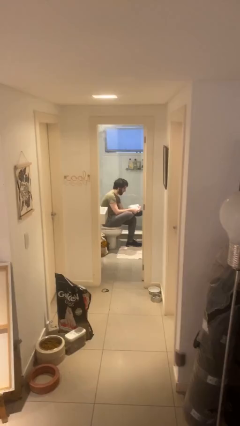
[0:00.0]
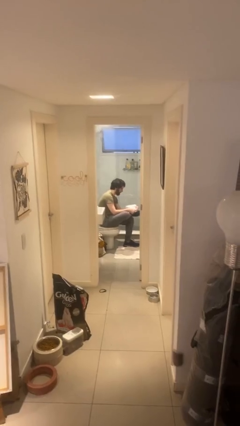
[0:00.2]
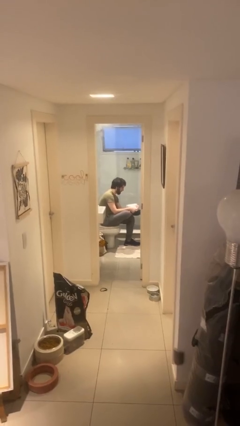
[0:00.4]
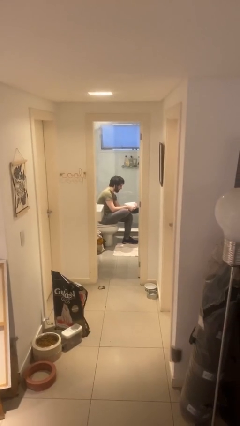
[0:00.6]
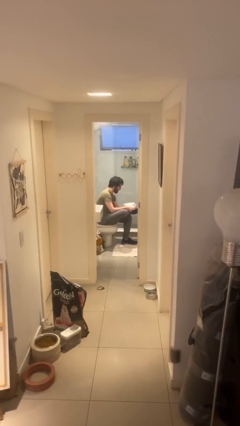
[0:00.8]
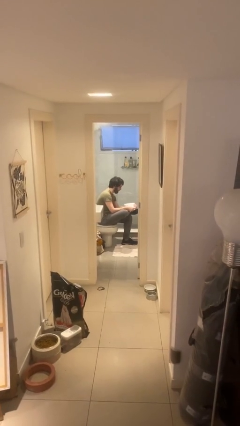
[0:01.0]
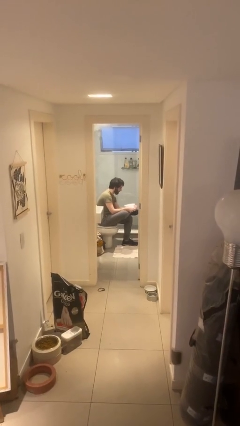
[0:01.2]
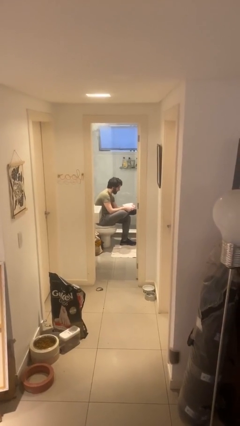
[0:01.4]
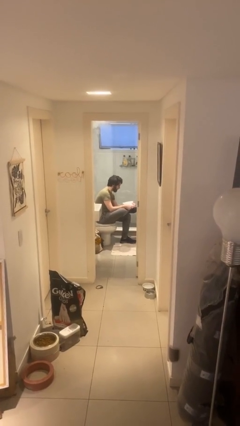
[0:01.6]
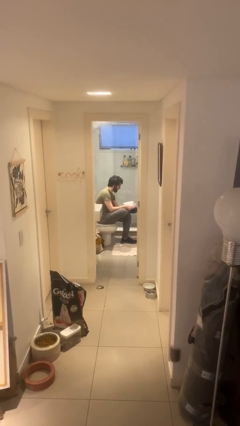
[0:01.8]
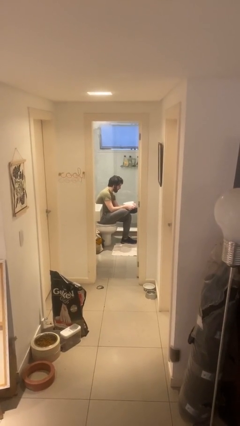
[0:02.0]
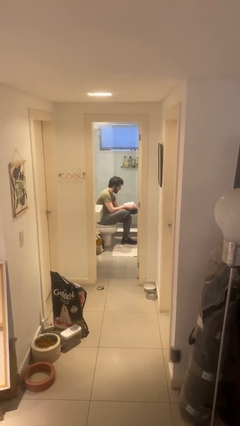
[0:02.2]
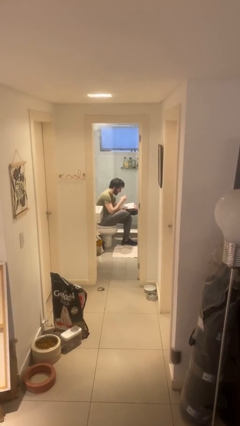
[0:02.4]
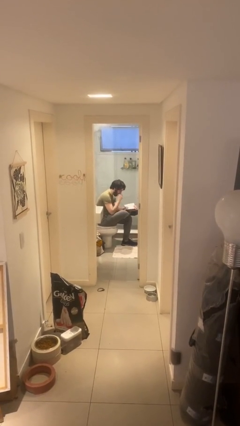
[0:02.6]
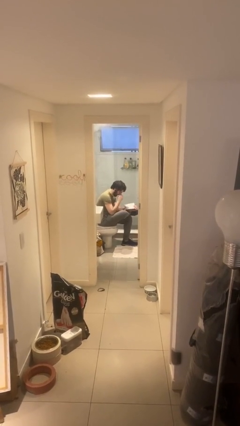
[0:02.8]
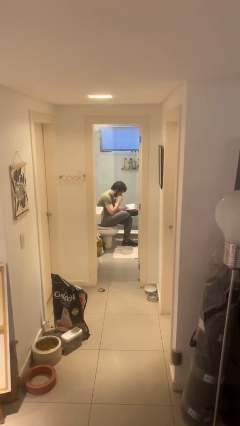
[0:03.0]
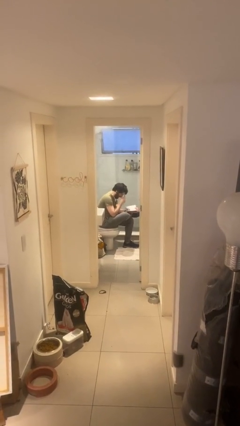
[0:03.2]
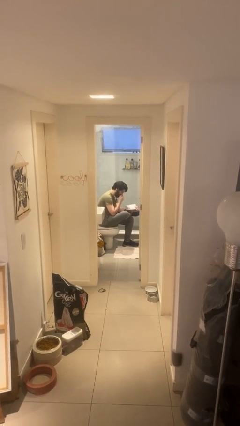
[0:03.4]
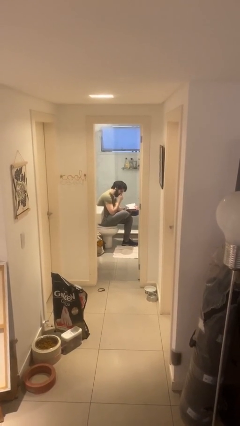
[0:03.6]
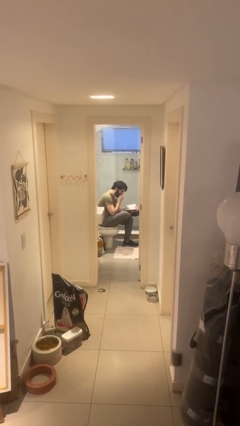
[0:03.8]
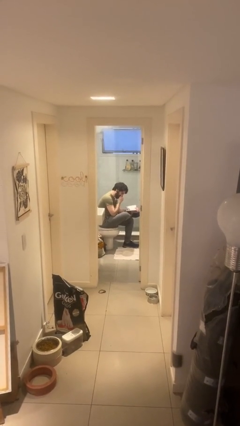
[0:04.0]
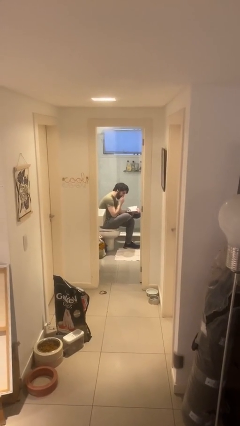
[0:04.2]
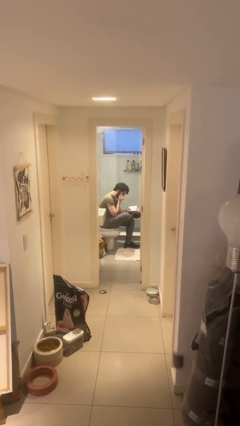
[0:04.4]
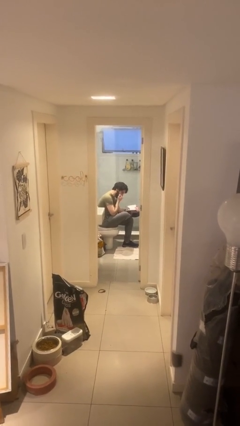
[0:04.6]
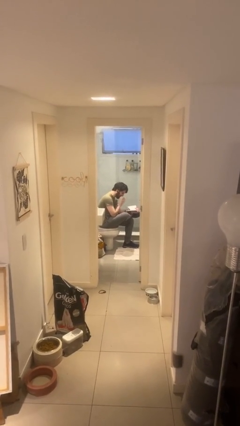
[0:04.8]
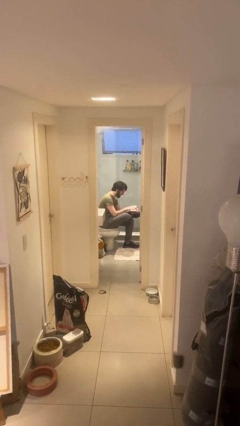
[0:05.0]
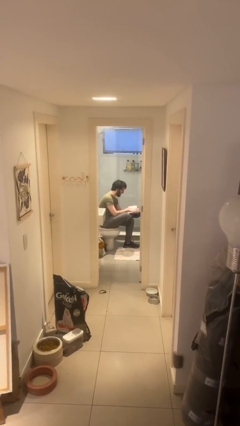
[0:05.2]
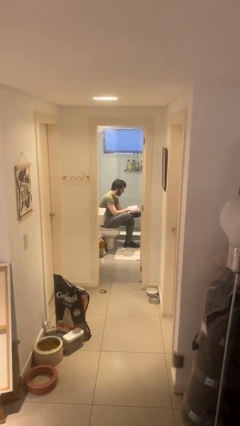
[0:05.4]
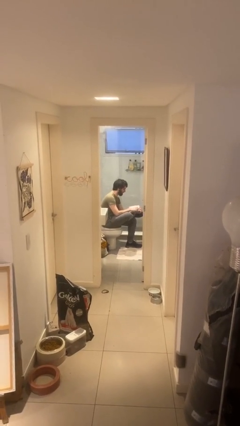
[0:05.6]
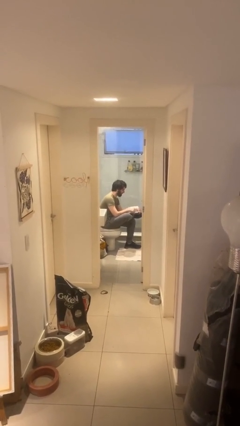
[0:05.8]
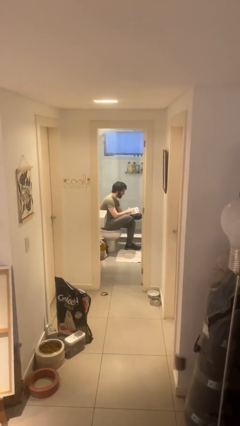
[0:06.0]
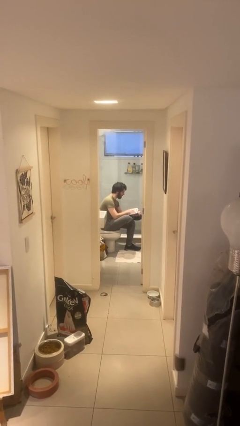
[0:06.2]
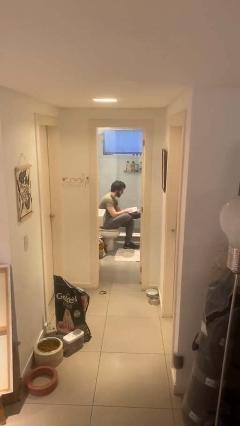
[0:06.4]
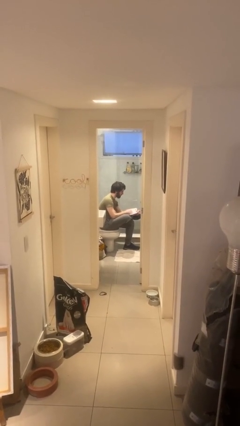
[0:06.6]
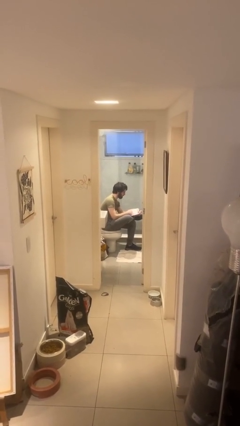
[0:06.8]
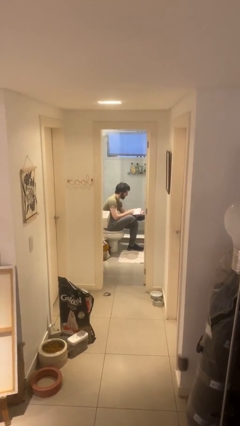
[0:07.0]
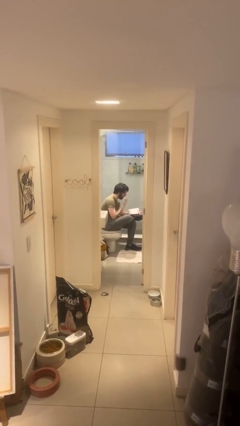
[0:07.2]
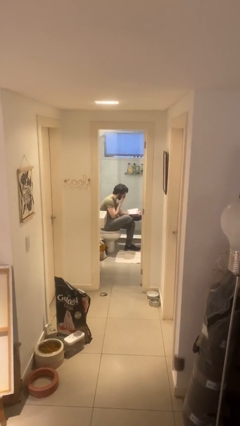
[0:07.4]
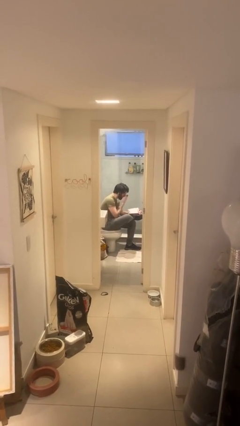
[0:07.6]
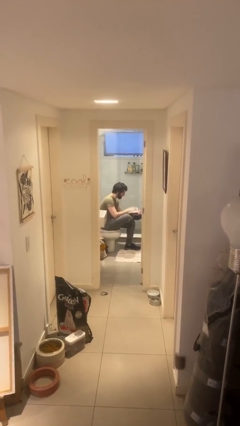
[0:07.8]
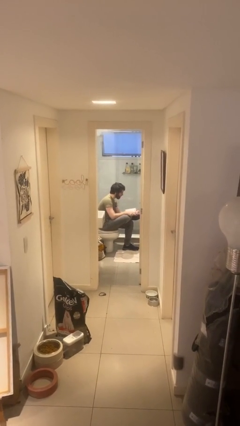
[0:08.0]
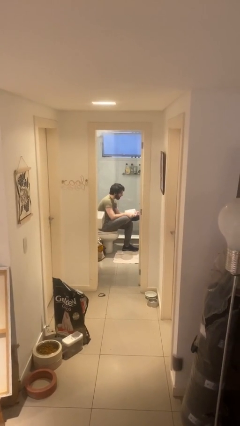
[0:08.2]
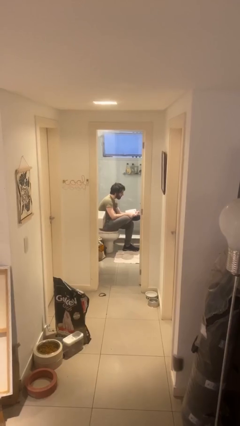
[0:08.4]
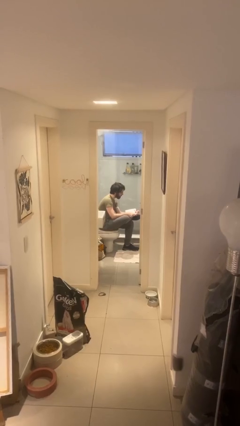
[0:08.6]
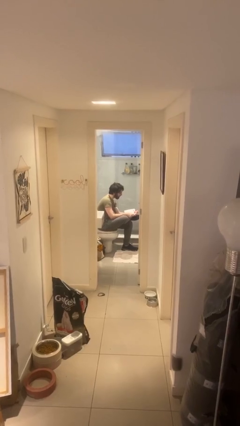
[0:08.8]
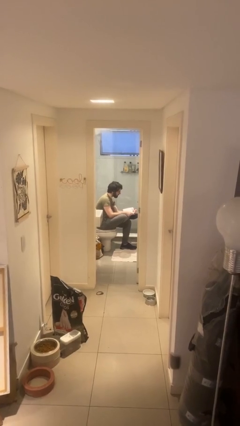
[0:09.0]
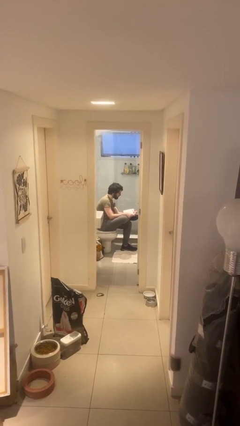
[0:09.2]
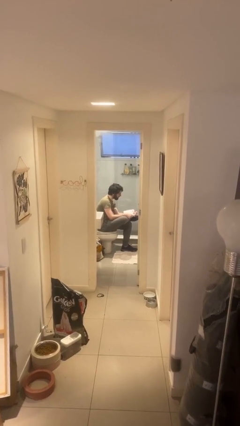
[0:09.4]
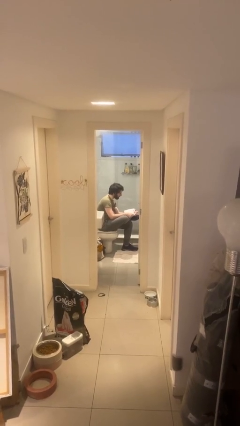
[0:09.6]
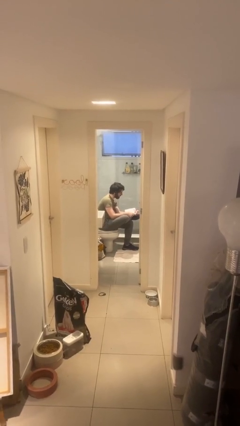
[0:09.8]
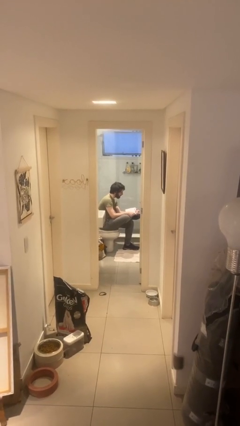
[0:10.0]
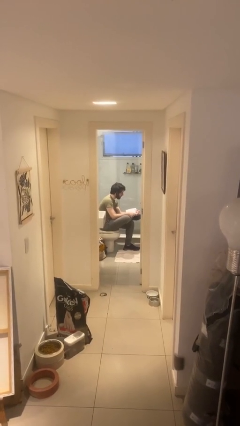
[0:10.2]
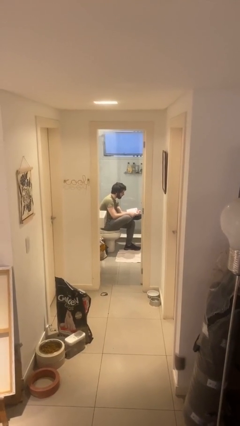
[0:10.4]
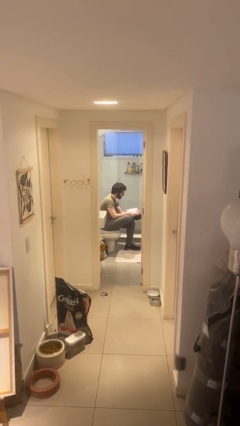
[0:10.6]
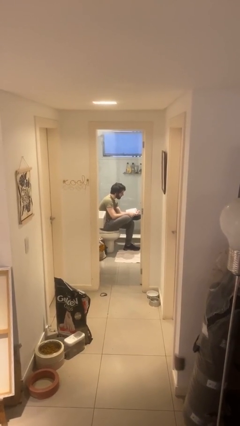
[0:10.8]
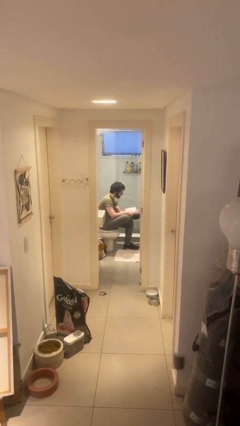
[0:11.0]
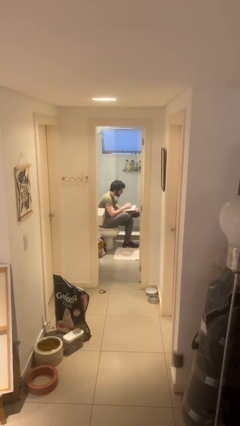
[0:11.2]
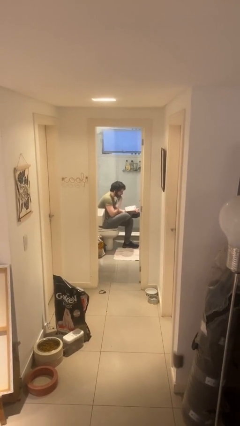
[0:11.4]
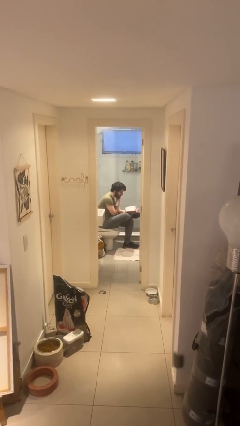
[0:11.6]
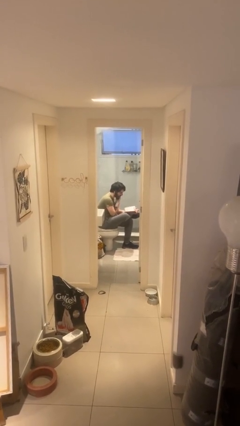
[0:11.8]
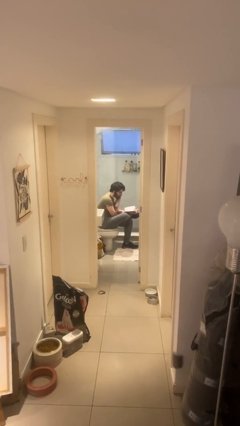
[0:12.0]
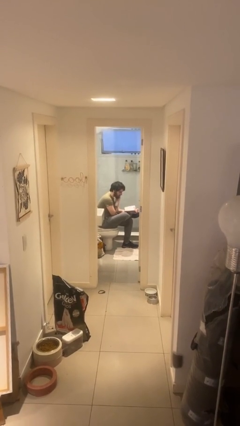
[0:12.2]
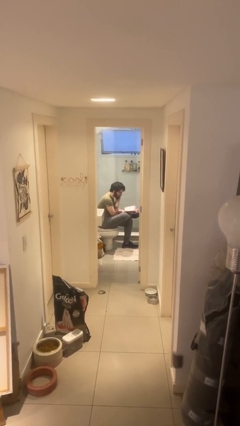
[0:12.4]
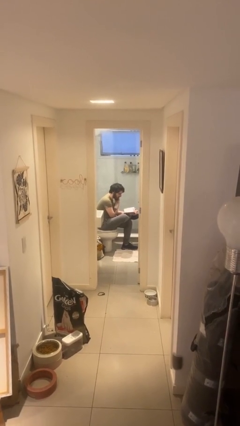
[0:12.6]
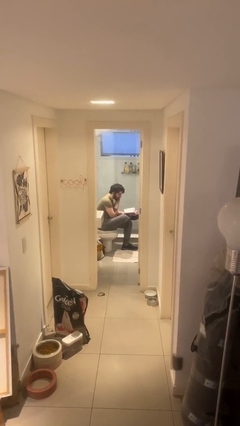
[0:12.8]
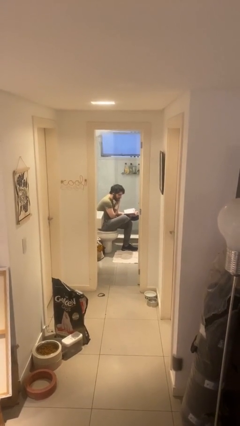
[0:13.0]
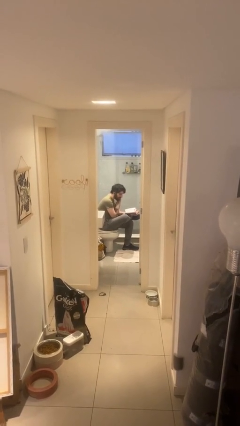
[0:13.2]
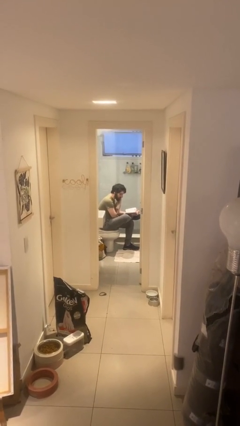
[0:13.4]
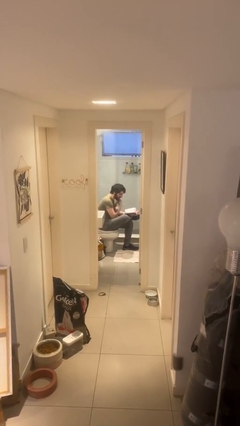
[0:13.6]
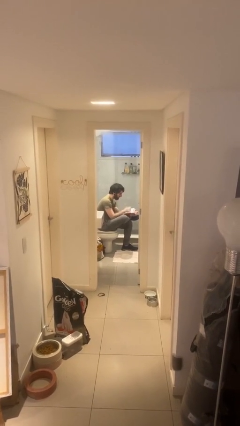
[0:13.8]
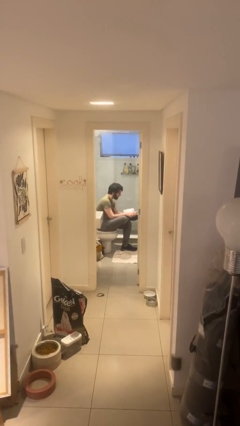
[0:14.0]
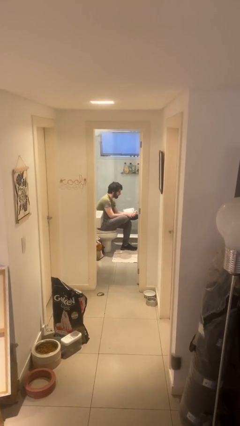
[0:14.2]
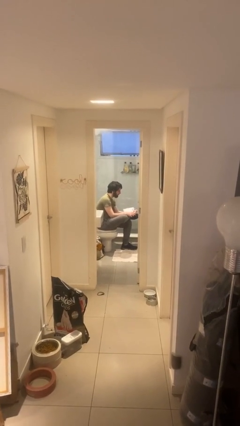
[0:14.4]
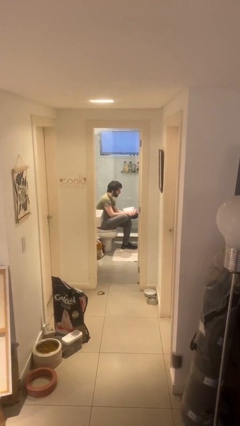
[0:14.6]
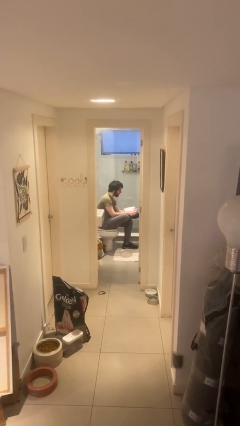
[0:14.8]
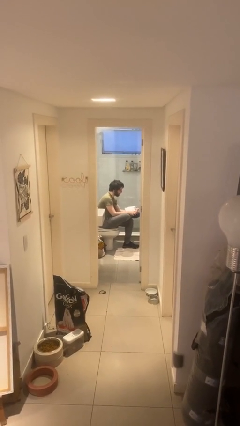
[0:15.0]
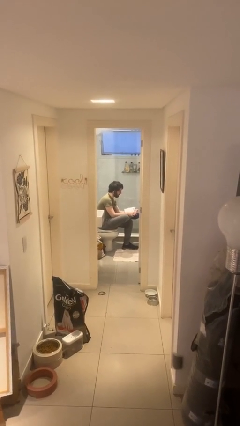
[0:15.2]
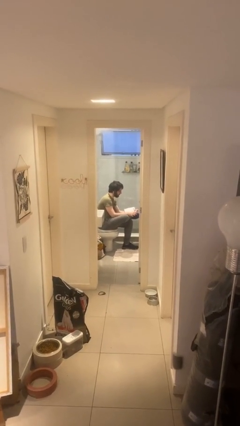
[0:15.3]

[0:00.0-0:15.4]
person reads document

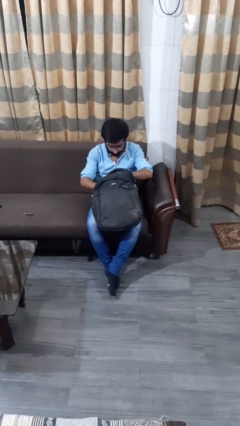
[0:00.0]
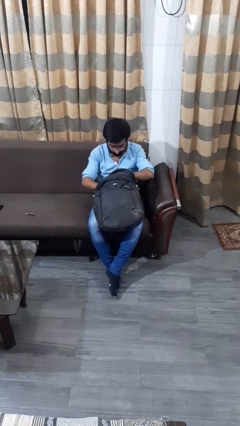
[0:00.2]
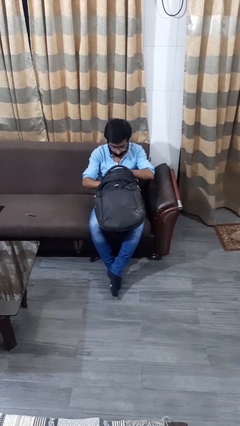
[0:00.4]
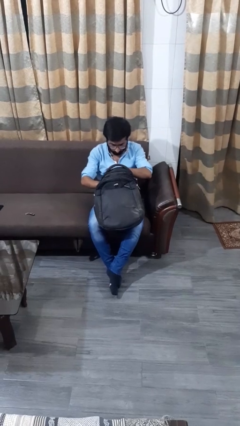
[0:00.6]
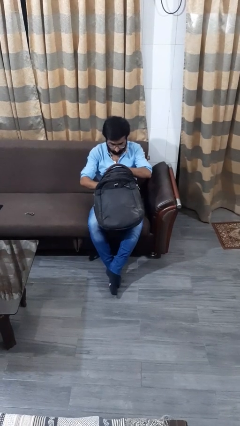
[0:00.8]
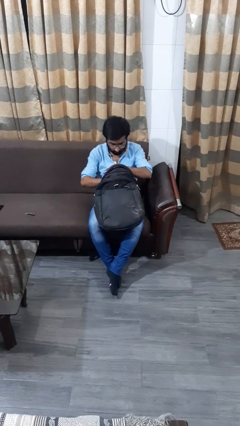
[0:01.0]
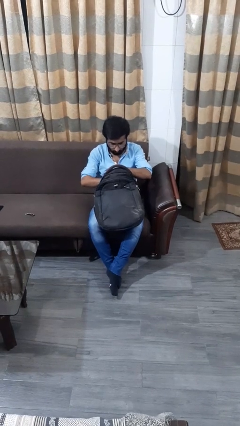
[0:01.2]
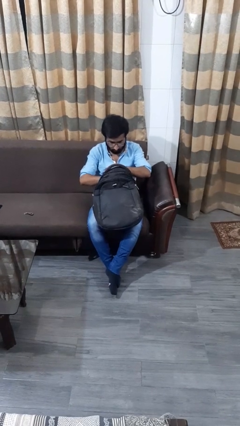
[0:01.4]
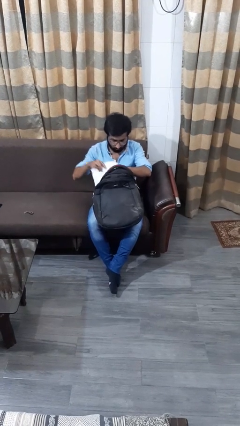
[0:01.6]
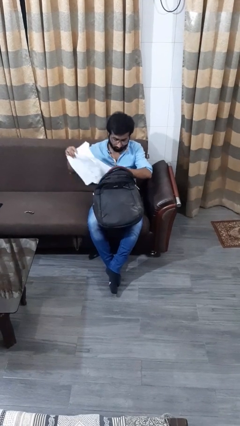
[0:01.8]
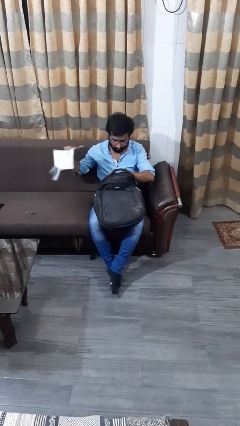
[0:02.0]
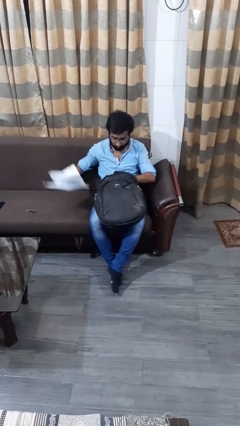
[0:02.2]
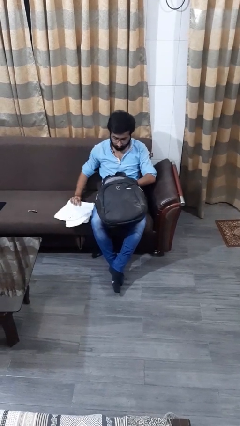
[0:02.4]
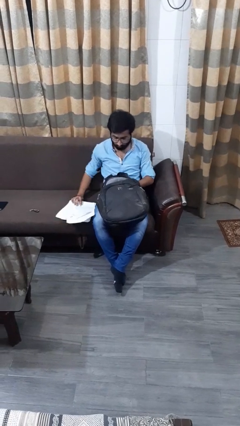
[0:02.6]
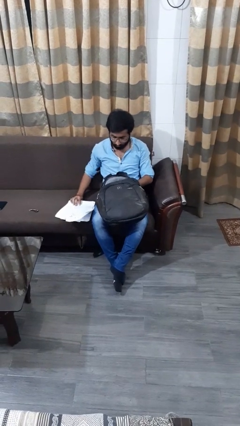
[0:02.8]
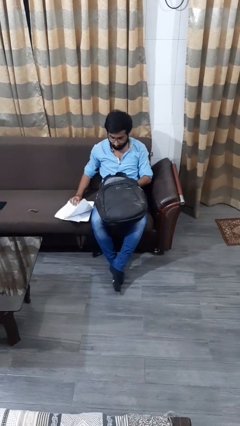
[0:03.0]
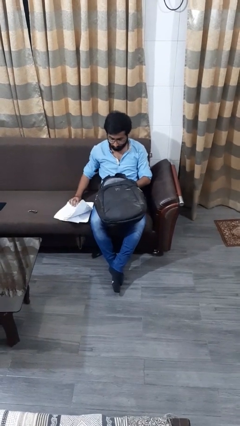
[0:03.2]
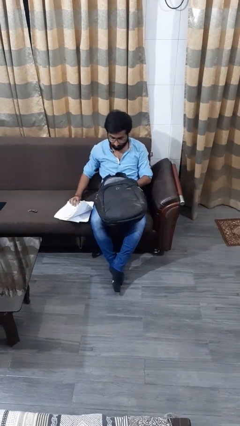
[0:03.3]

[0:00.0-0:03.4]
person takes object from backpack
